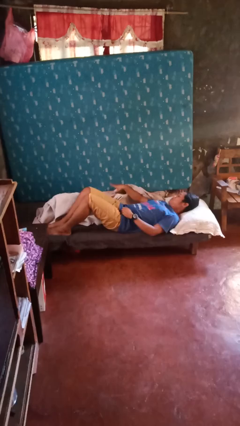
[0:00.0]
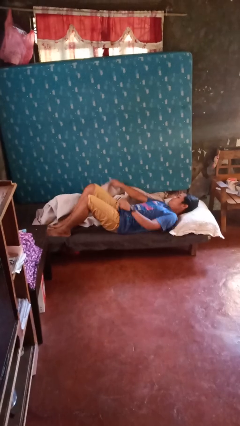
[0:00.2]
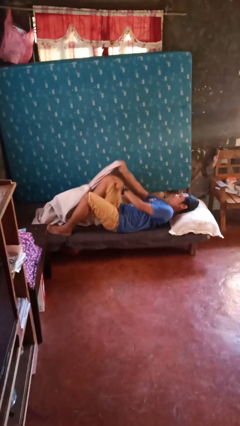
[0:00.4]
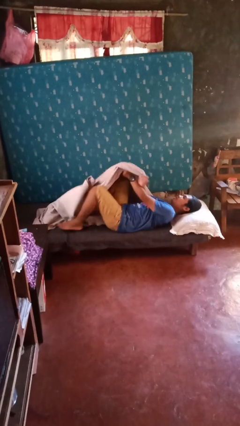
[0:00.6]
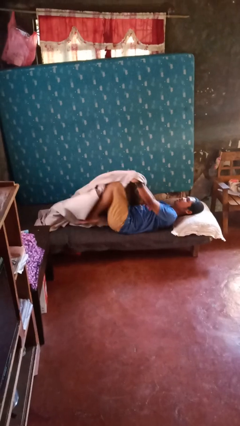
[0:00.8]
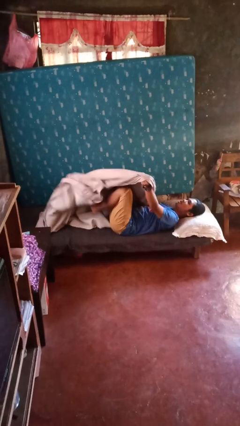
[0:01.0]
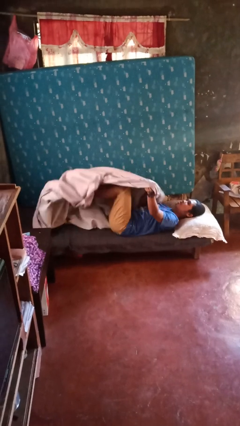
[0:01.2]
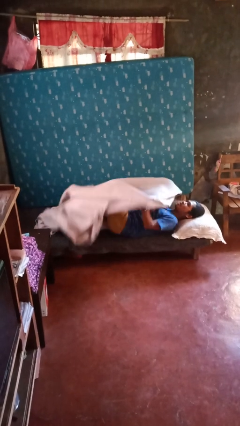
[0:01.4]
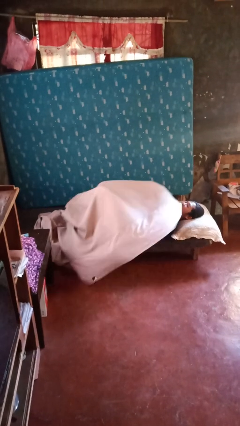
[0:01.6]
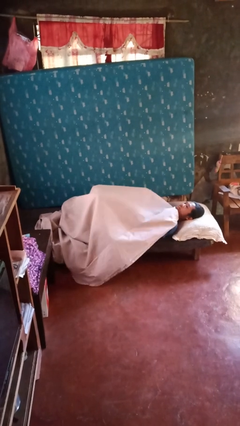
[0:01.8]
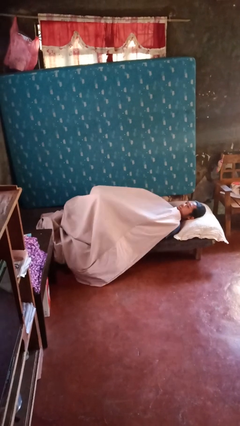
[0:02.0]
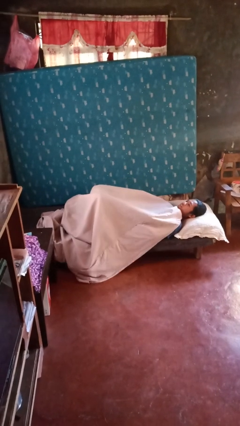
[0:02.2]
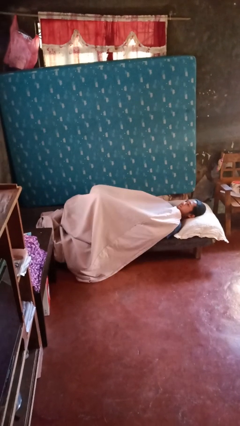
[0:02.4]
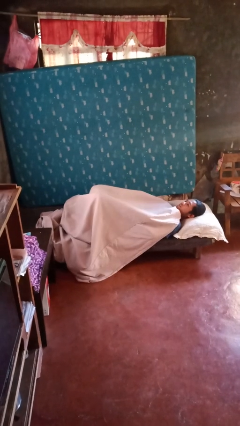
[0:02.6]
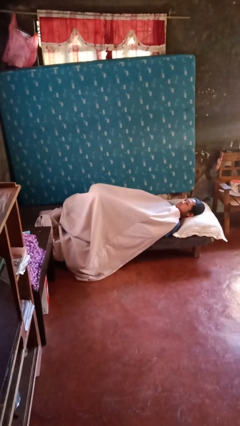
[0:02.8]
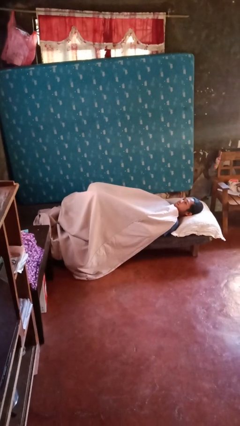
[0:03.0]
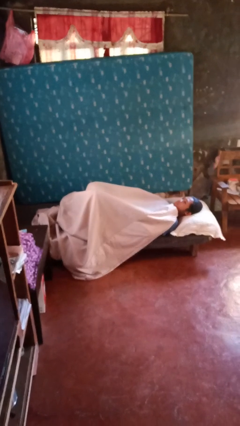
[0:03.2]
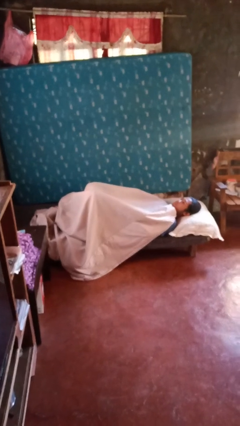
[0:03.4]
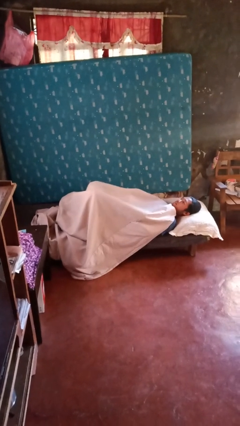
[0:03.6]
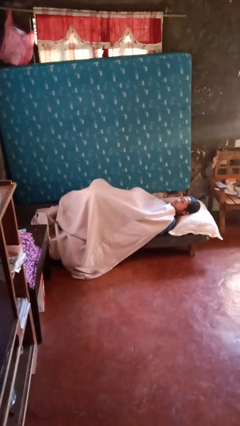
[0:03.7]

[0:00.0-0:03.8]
person covers with bedsheets

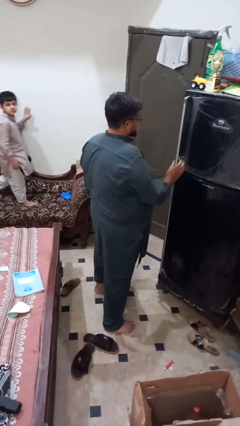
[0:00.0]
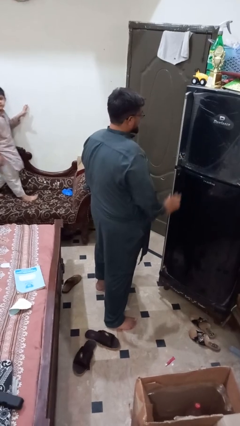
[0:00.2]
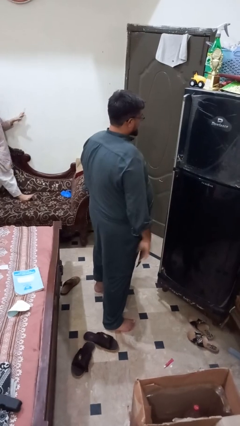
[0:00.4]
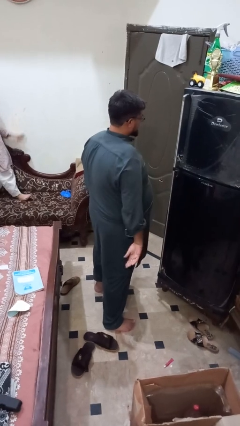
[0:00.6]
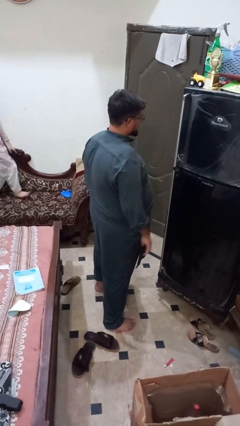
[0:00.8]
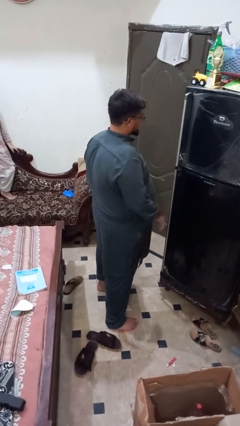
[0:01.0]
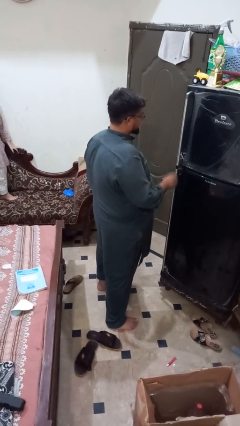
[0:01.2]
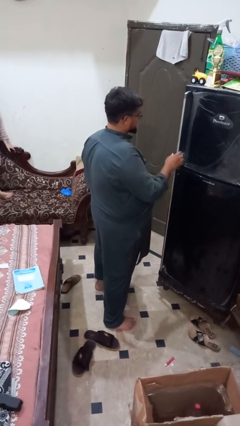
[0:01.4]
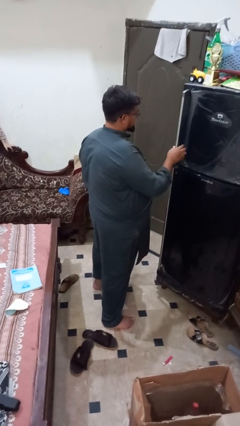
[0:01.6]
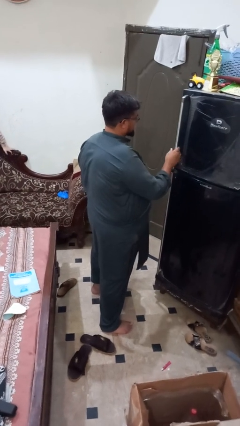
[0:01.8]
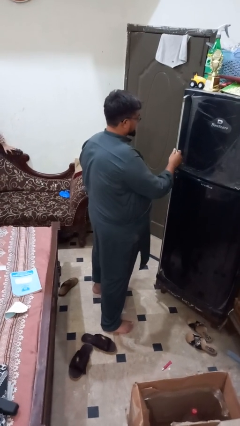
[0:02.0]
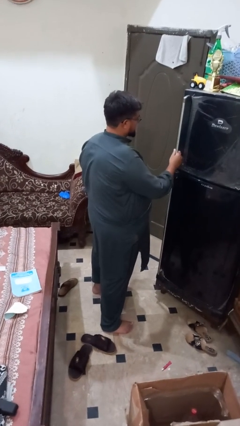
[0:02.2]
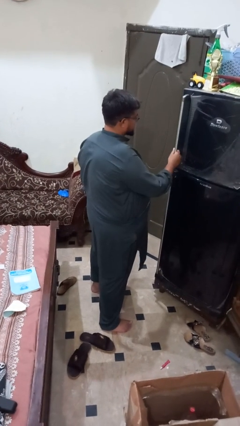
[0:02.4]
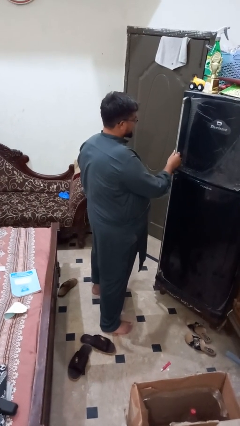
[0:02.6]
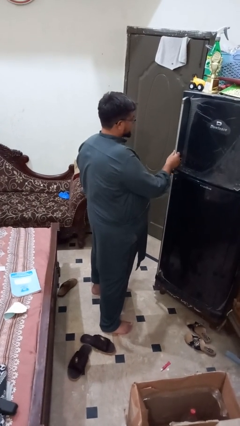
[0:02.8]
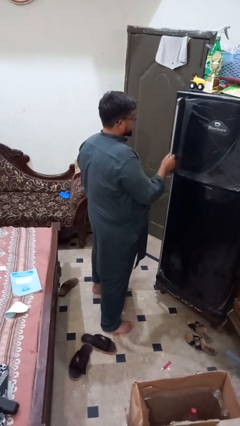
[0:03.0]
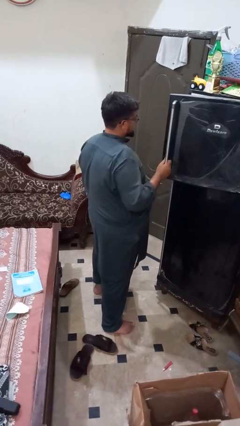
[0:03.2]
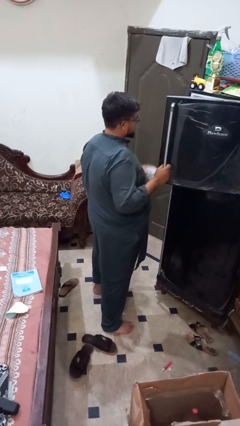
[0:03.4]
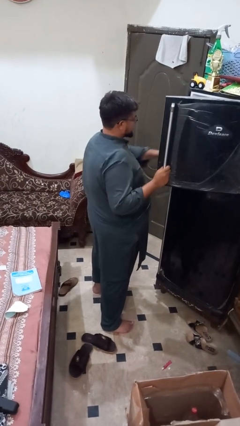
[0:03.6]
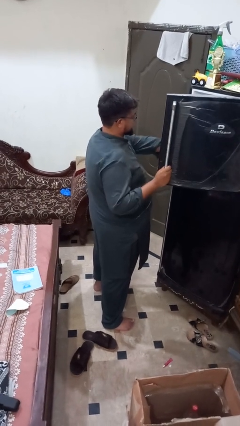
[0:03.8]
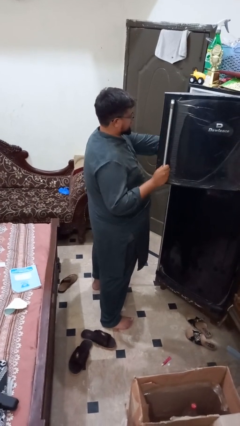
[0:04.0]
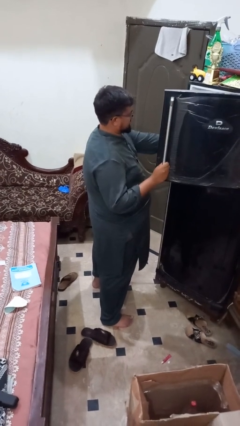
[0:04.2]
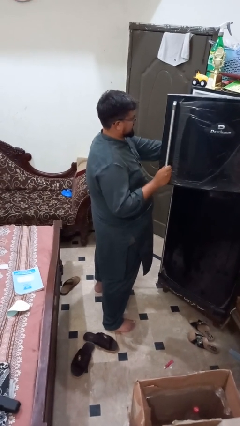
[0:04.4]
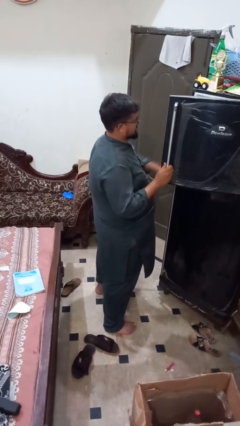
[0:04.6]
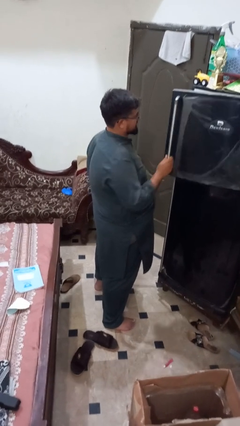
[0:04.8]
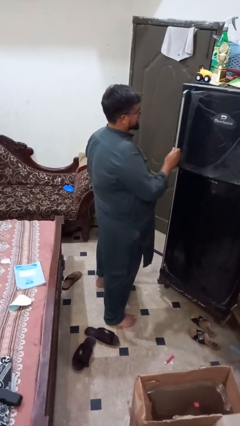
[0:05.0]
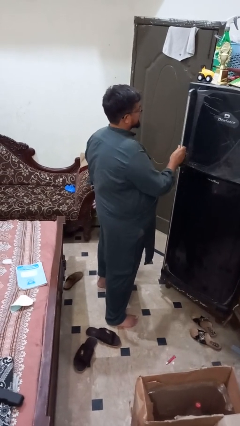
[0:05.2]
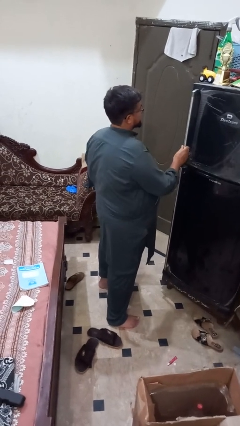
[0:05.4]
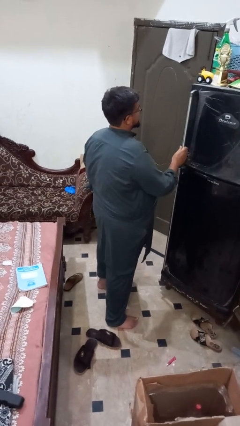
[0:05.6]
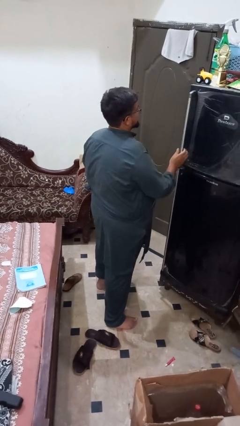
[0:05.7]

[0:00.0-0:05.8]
person puts object into refrigerator

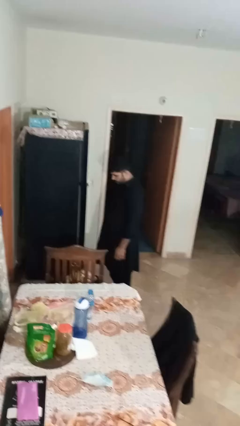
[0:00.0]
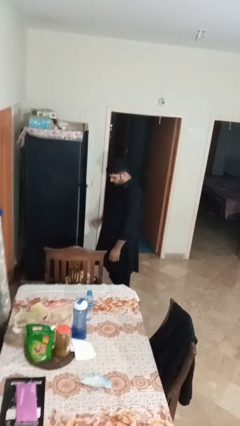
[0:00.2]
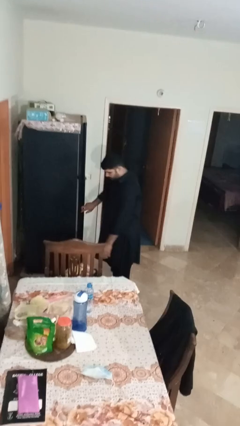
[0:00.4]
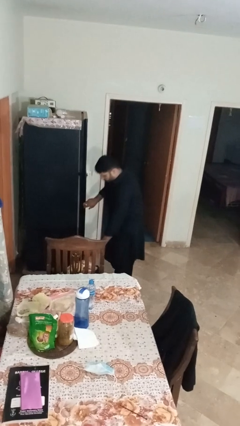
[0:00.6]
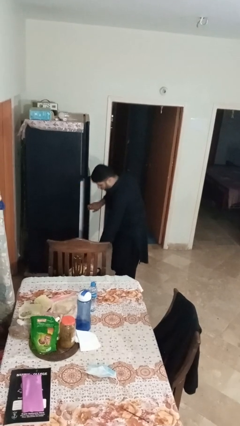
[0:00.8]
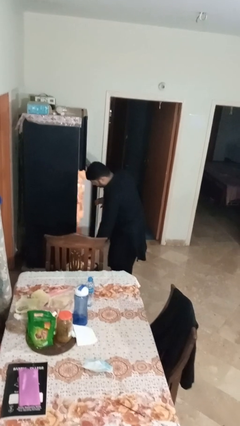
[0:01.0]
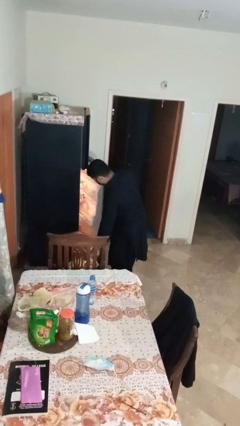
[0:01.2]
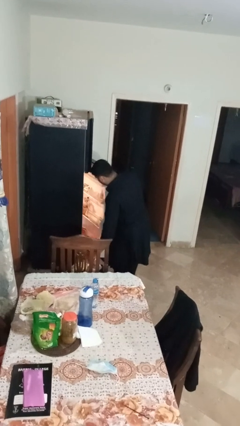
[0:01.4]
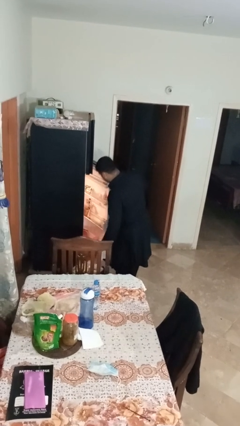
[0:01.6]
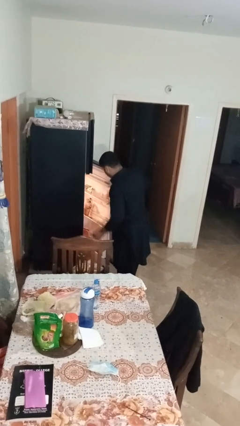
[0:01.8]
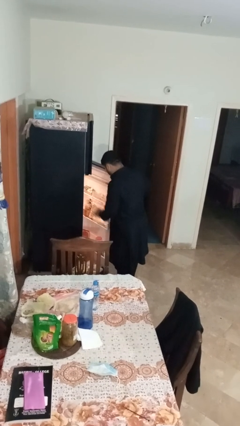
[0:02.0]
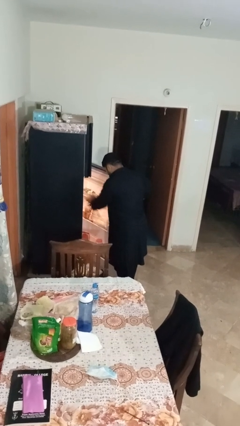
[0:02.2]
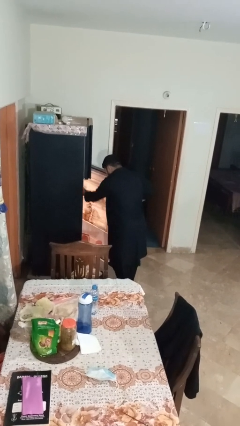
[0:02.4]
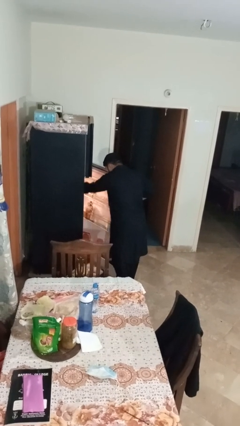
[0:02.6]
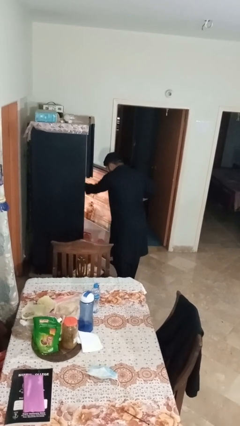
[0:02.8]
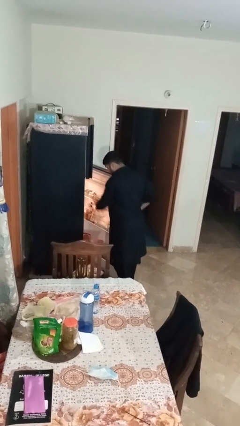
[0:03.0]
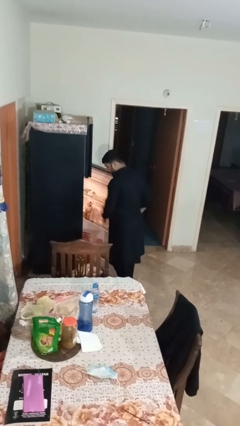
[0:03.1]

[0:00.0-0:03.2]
person loads groceries into refrigerator

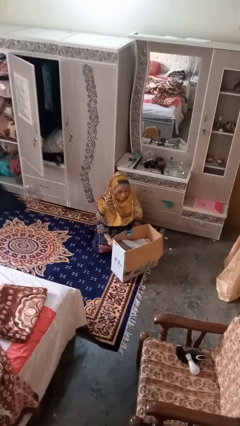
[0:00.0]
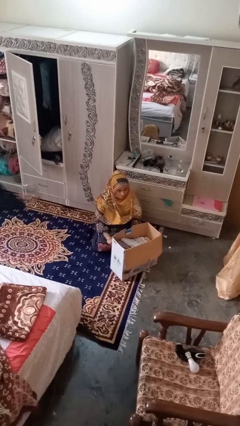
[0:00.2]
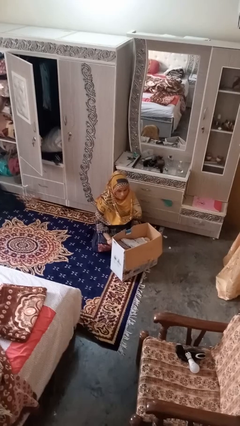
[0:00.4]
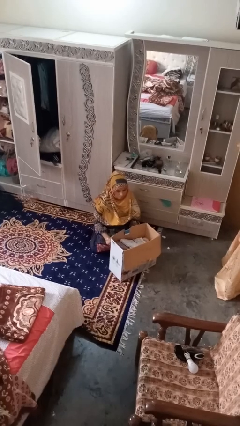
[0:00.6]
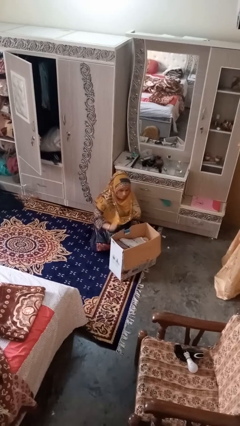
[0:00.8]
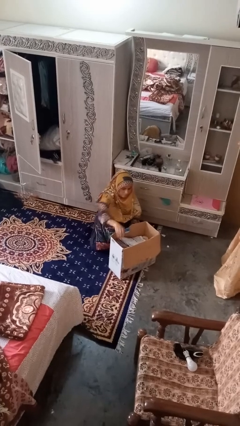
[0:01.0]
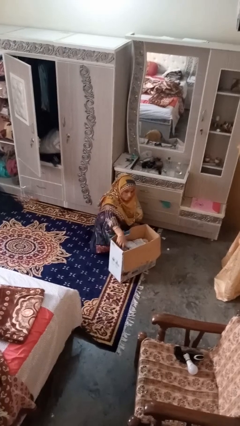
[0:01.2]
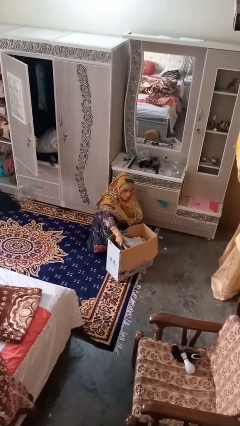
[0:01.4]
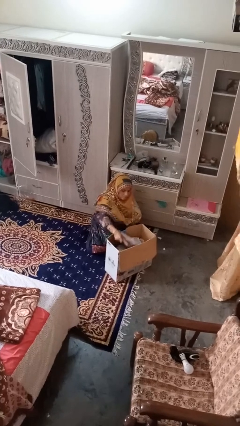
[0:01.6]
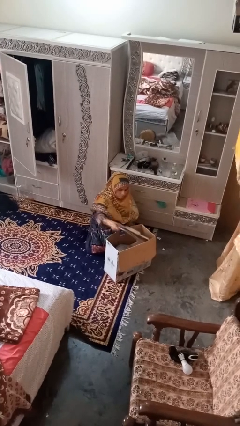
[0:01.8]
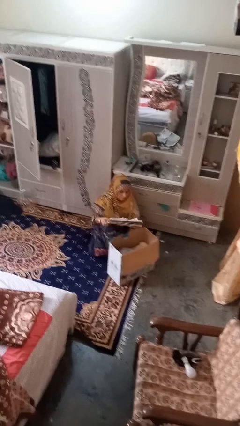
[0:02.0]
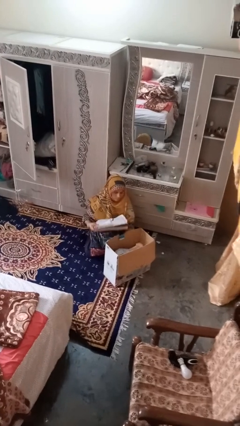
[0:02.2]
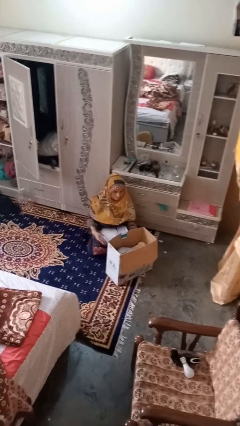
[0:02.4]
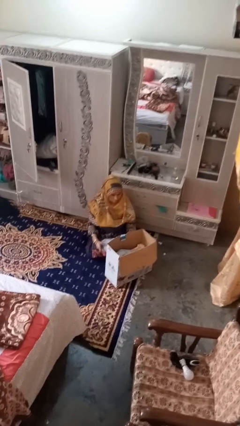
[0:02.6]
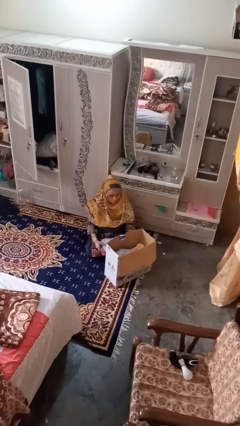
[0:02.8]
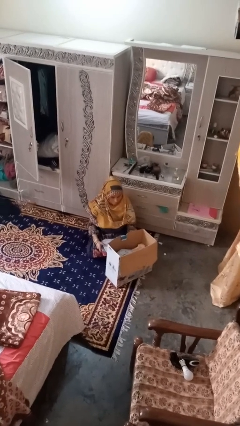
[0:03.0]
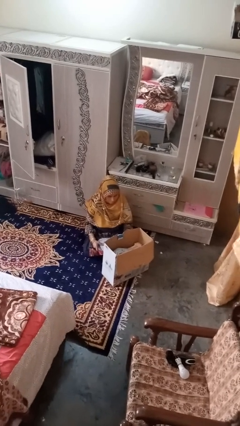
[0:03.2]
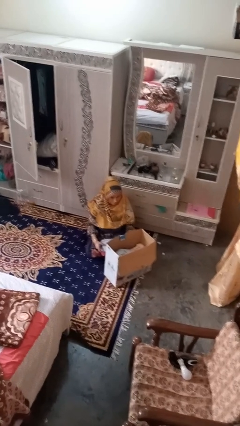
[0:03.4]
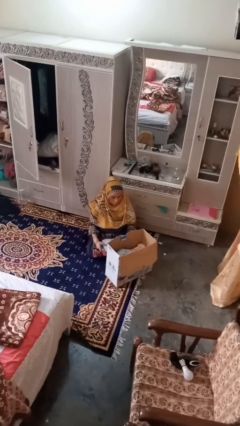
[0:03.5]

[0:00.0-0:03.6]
person takes object from box

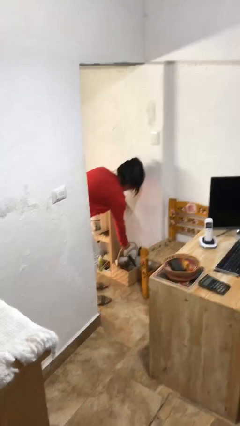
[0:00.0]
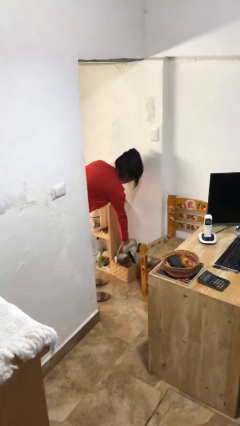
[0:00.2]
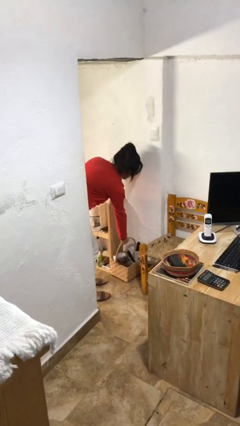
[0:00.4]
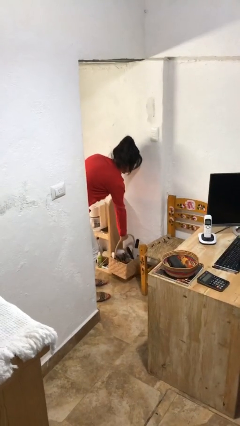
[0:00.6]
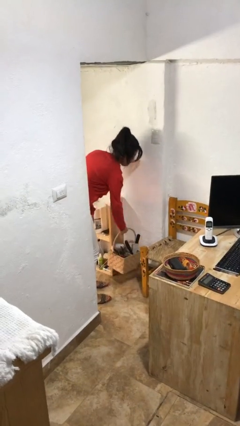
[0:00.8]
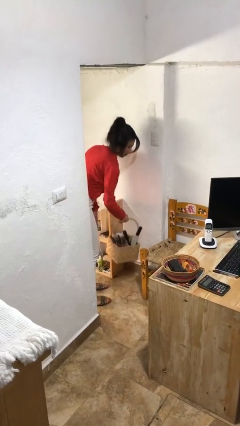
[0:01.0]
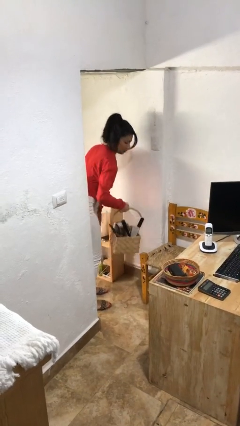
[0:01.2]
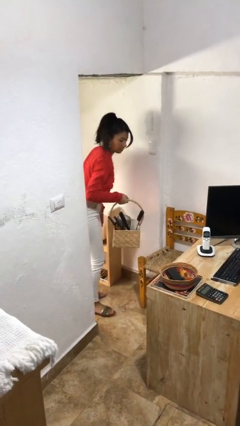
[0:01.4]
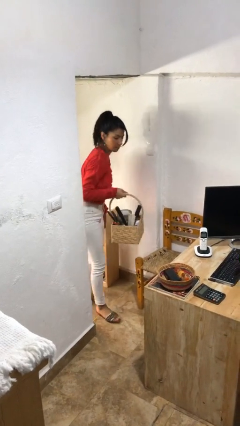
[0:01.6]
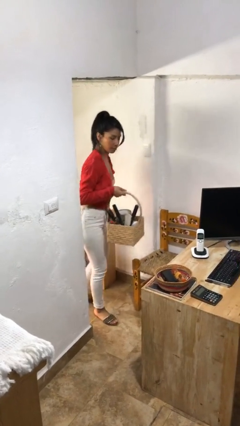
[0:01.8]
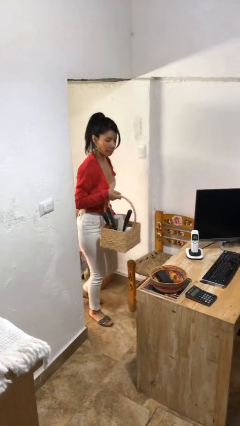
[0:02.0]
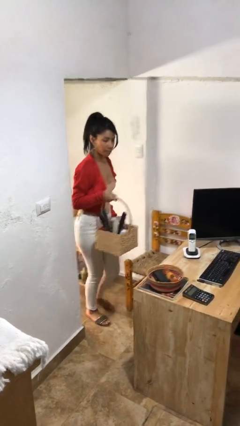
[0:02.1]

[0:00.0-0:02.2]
person picks up object from floor
